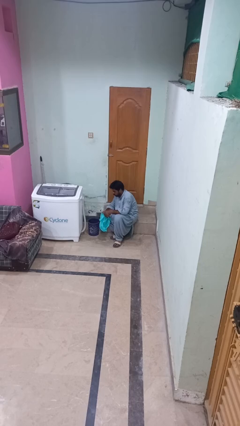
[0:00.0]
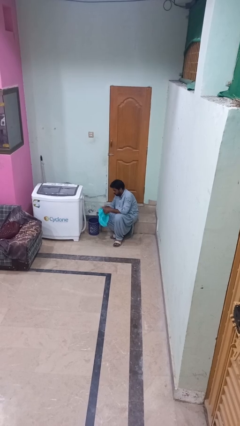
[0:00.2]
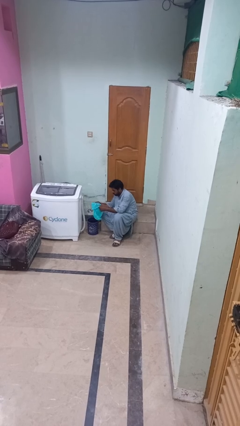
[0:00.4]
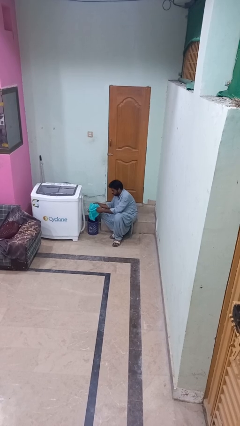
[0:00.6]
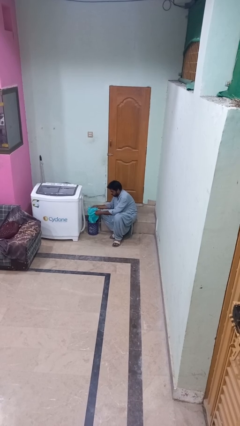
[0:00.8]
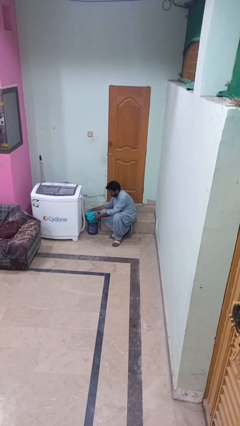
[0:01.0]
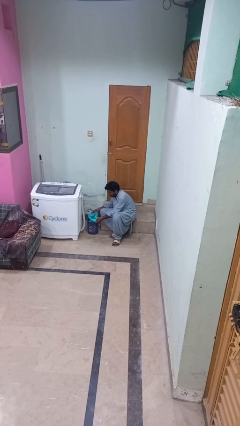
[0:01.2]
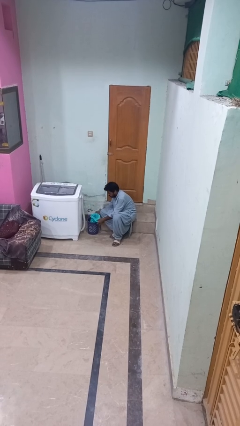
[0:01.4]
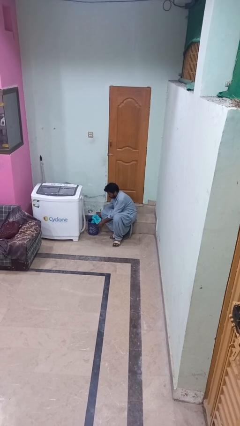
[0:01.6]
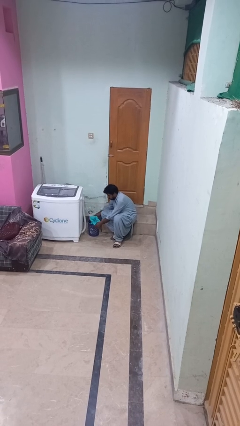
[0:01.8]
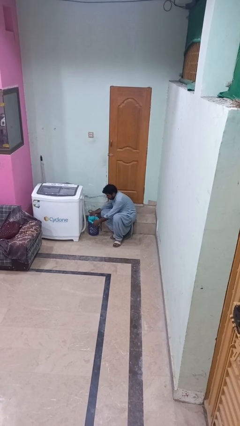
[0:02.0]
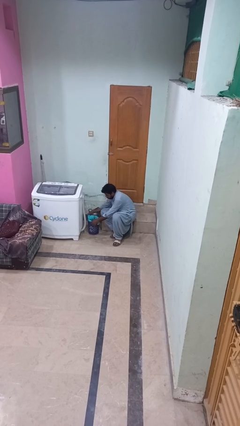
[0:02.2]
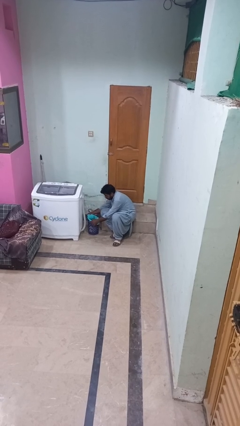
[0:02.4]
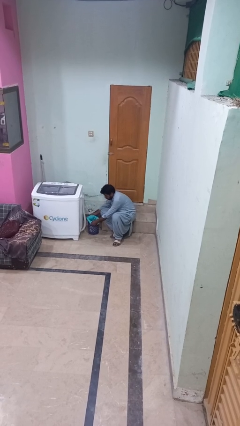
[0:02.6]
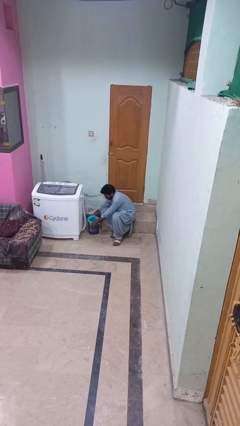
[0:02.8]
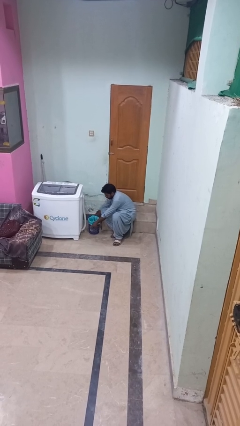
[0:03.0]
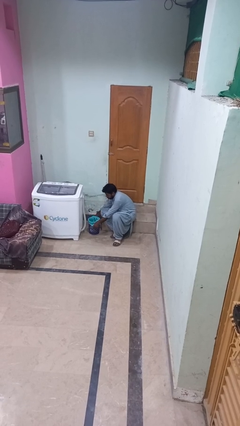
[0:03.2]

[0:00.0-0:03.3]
person inserts trashbag into trashcan

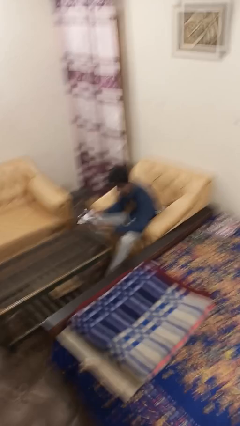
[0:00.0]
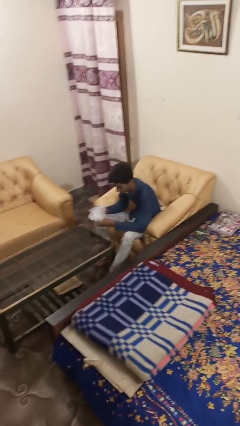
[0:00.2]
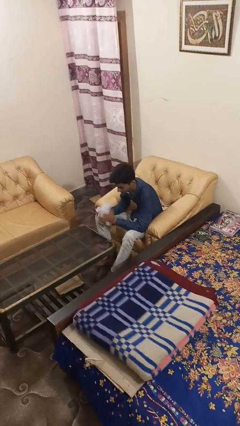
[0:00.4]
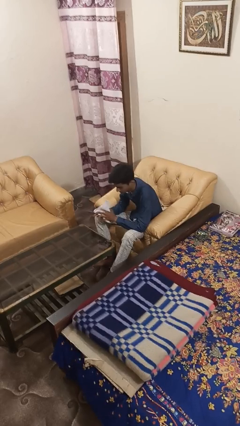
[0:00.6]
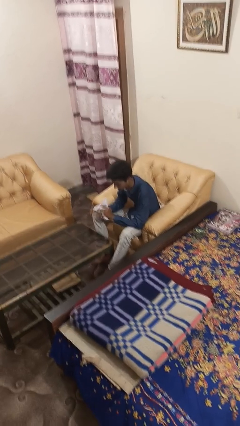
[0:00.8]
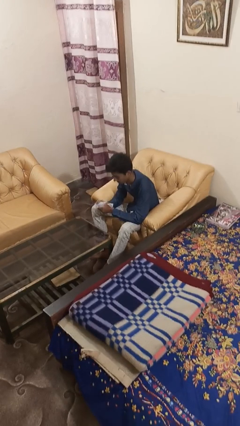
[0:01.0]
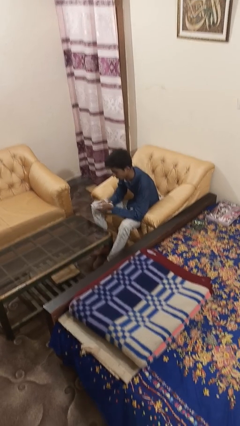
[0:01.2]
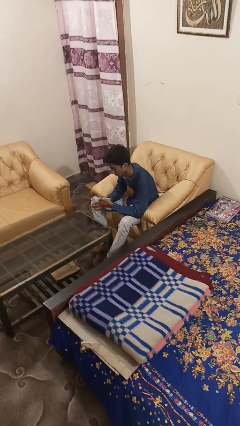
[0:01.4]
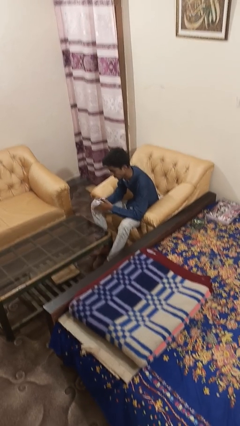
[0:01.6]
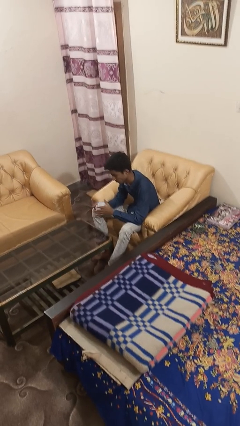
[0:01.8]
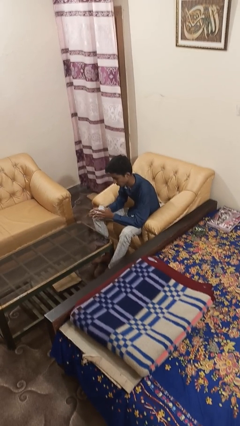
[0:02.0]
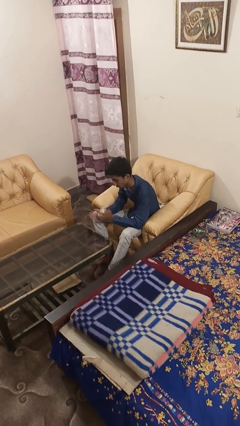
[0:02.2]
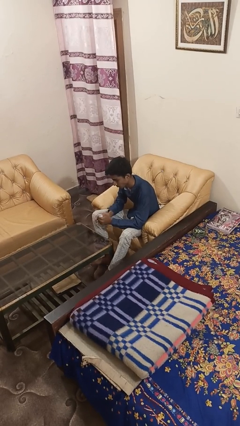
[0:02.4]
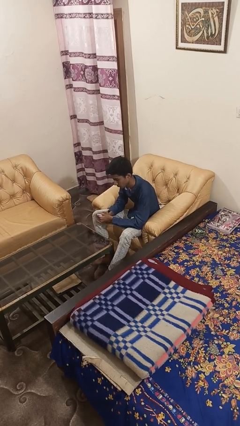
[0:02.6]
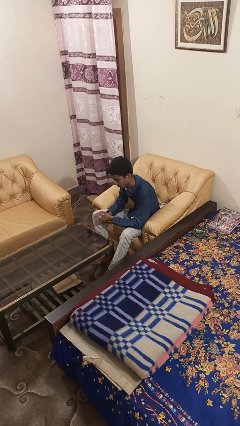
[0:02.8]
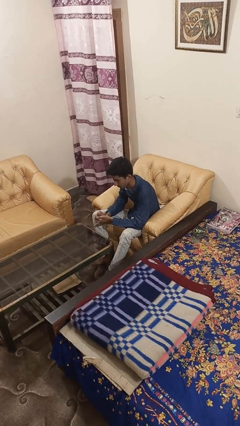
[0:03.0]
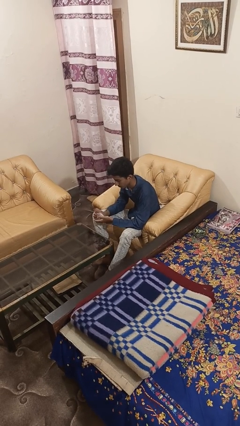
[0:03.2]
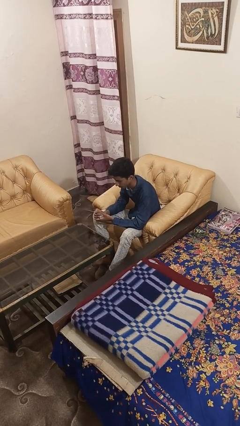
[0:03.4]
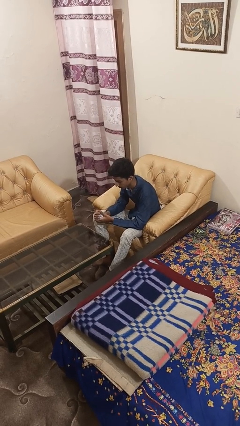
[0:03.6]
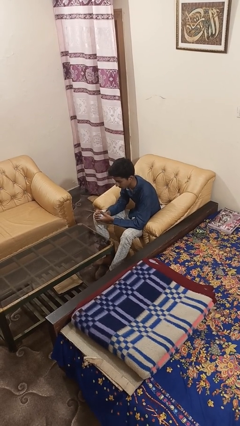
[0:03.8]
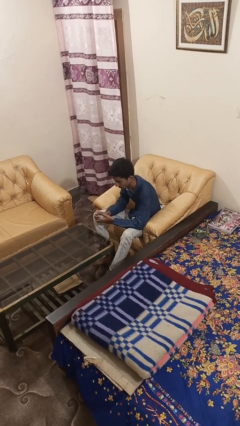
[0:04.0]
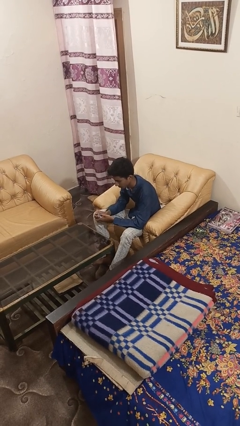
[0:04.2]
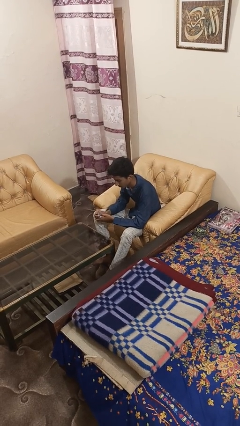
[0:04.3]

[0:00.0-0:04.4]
person crumples paper

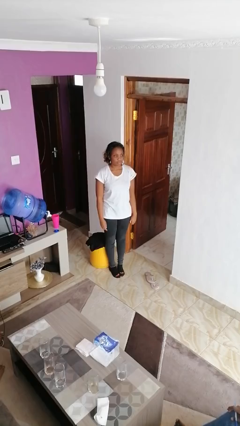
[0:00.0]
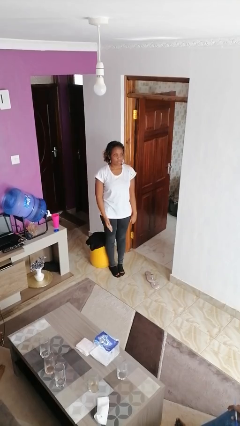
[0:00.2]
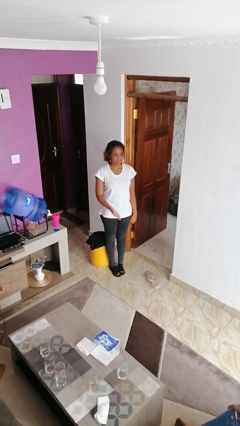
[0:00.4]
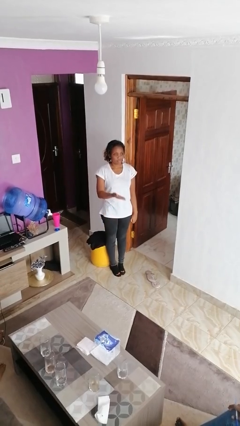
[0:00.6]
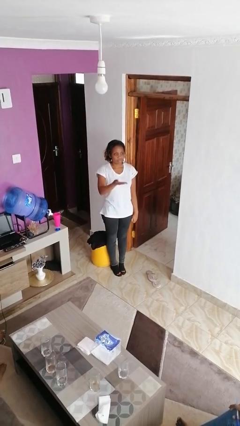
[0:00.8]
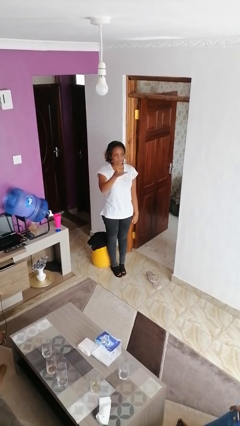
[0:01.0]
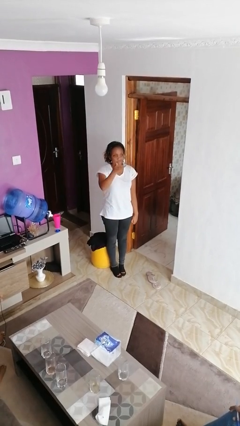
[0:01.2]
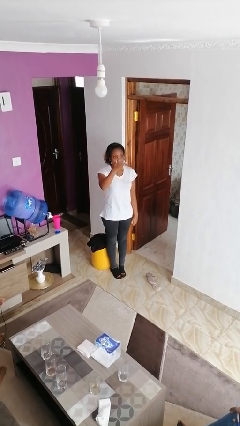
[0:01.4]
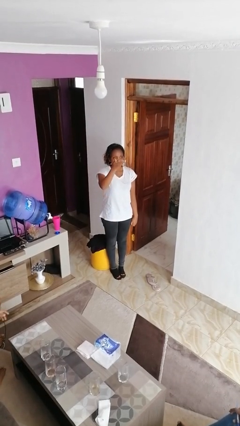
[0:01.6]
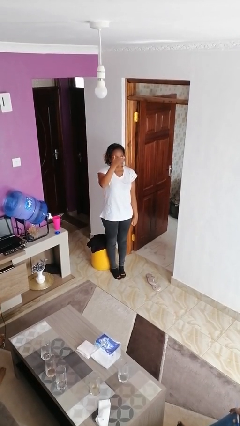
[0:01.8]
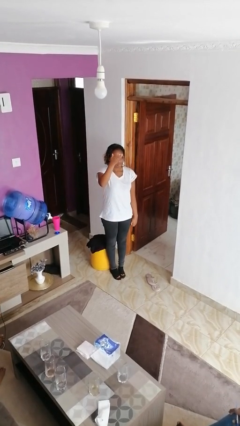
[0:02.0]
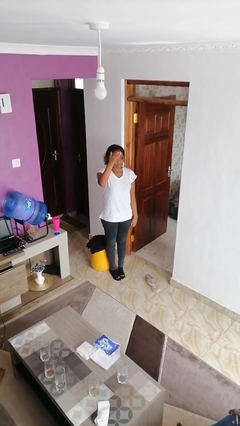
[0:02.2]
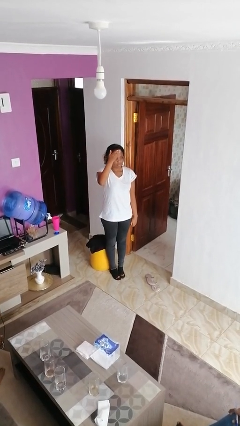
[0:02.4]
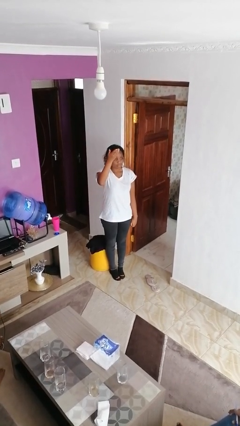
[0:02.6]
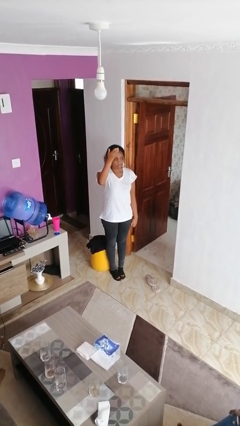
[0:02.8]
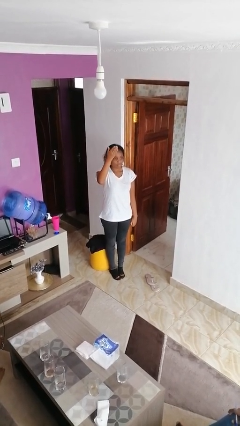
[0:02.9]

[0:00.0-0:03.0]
person gestures swipe up

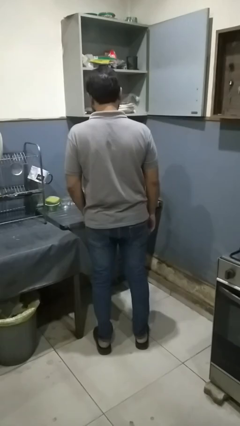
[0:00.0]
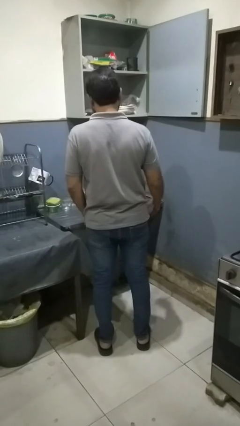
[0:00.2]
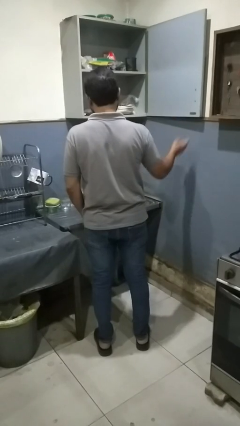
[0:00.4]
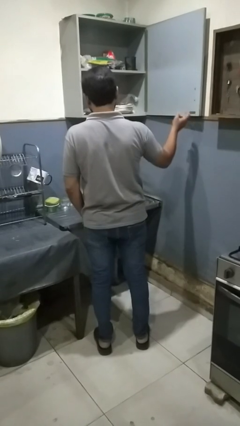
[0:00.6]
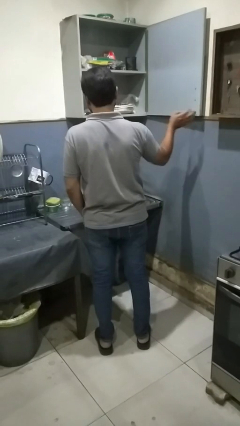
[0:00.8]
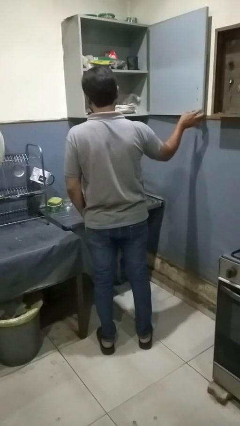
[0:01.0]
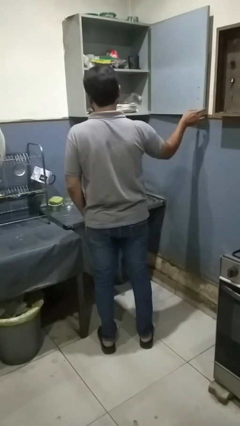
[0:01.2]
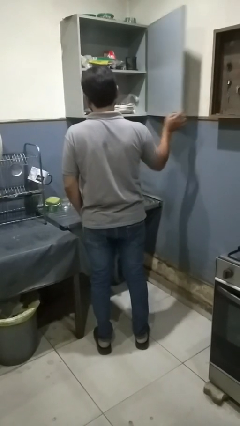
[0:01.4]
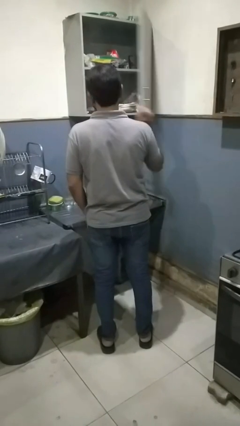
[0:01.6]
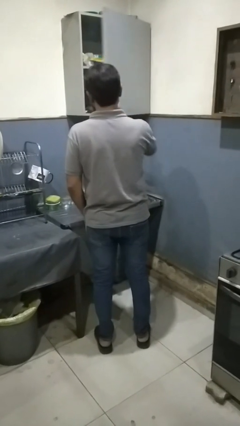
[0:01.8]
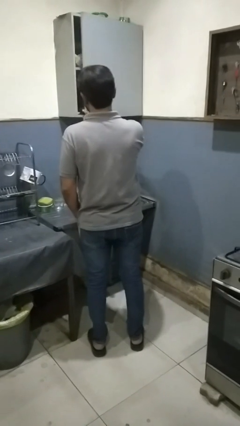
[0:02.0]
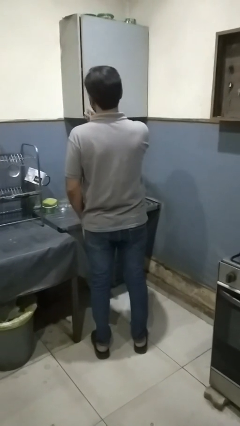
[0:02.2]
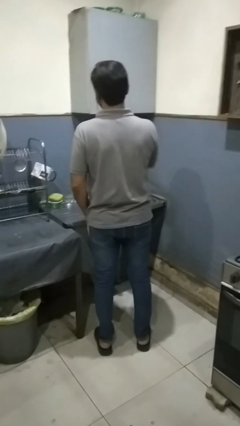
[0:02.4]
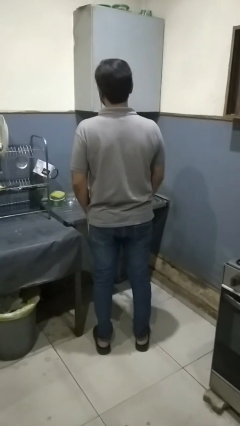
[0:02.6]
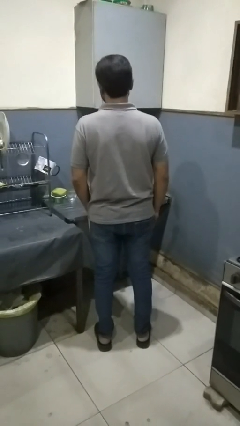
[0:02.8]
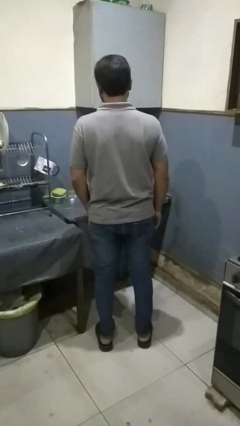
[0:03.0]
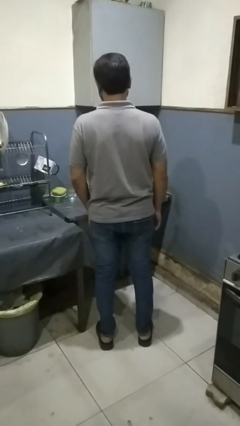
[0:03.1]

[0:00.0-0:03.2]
person closes kitchen drawer

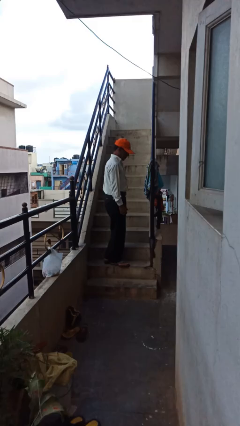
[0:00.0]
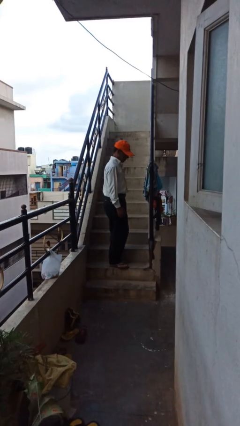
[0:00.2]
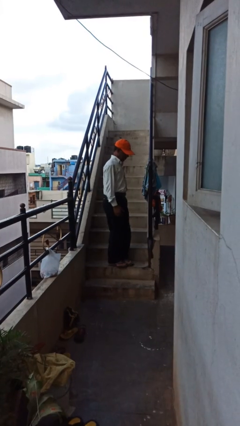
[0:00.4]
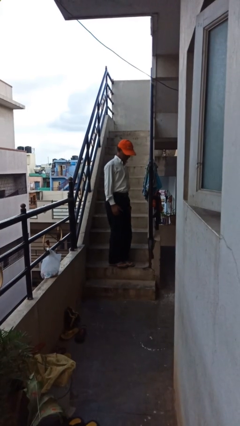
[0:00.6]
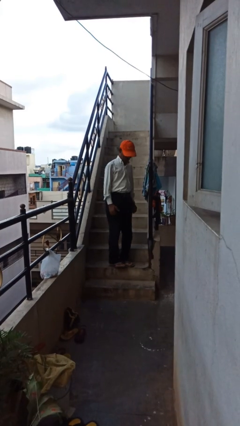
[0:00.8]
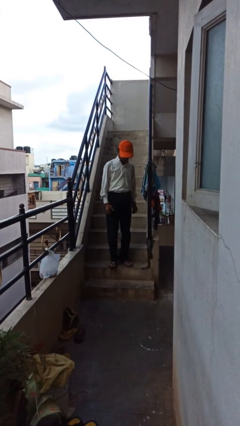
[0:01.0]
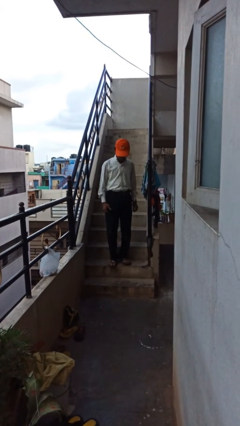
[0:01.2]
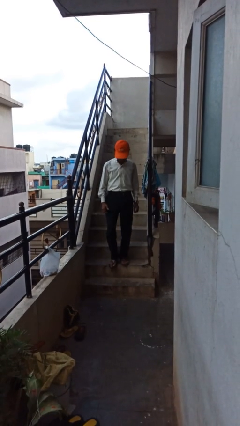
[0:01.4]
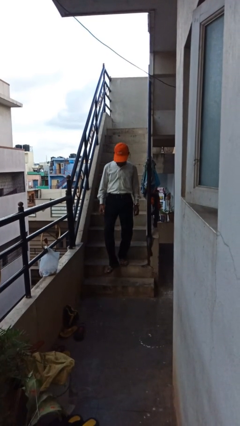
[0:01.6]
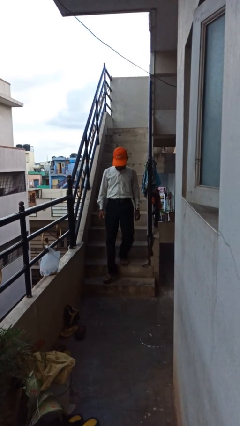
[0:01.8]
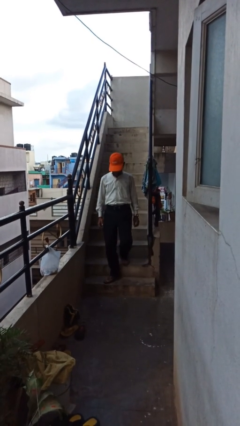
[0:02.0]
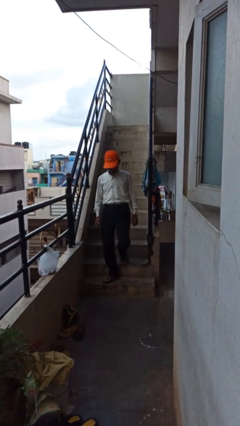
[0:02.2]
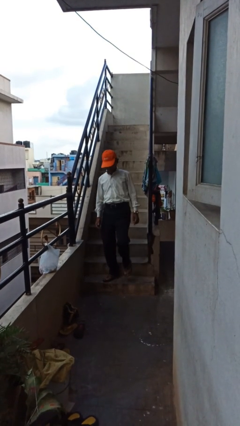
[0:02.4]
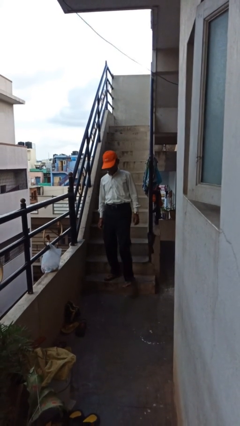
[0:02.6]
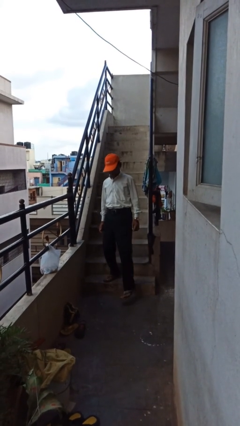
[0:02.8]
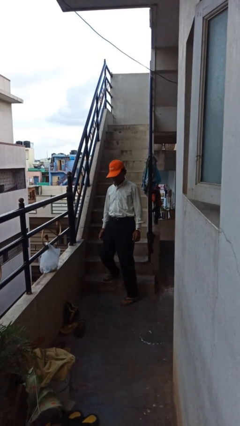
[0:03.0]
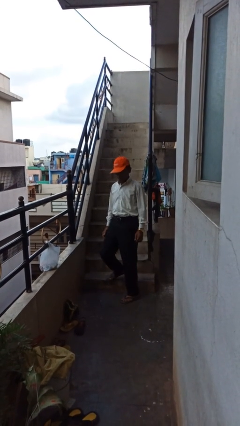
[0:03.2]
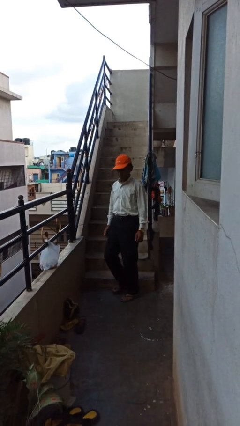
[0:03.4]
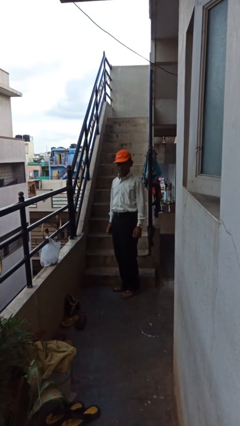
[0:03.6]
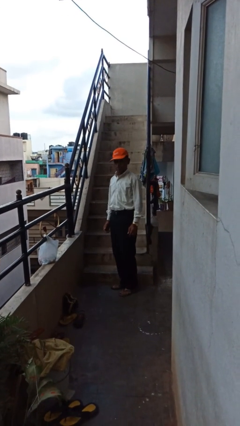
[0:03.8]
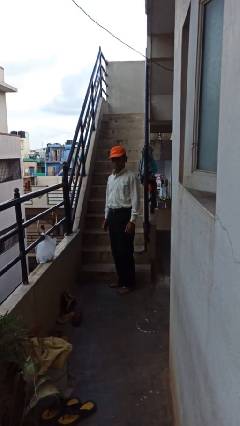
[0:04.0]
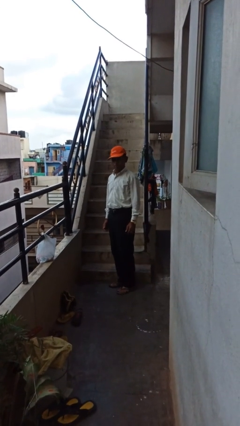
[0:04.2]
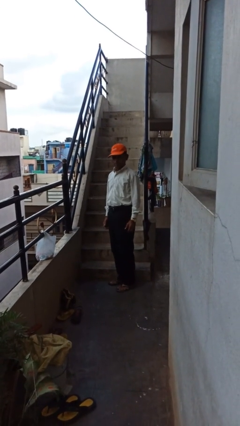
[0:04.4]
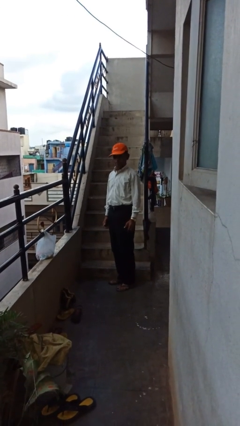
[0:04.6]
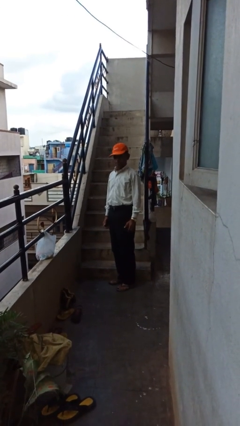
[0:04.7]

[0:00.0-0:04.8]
person climbs down stairs
